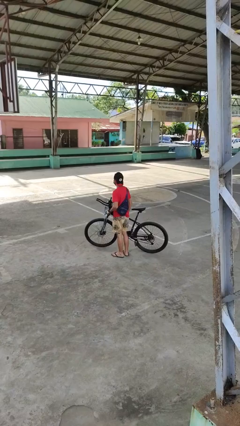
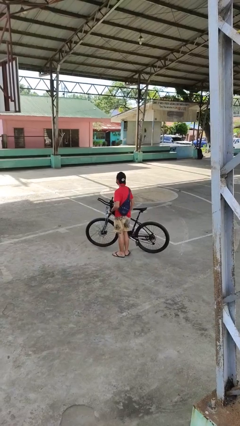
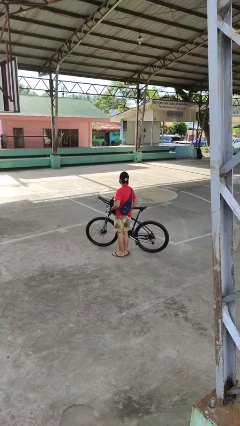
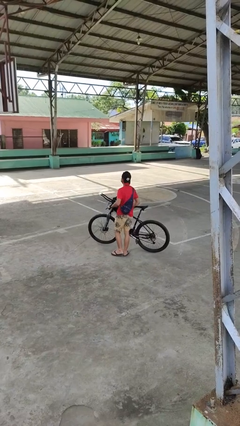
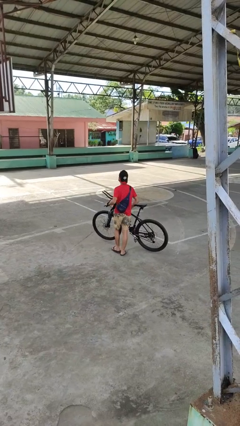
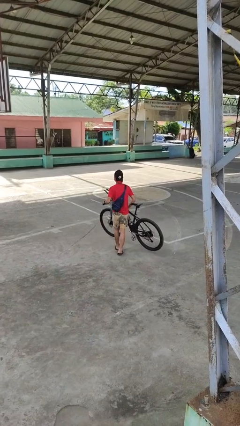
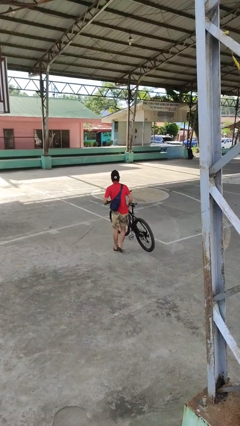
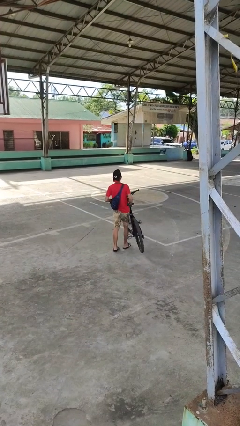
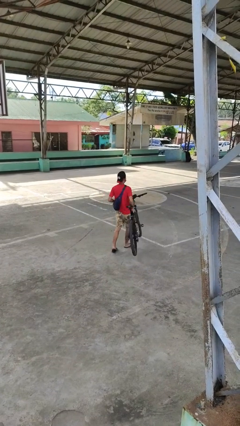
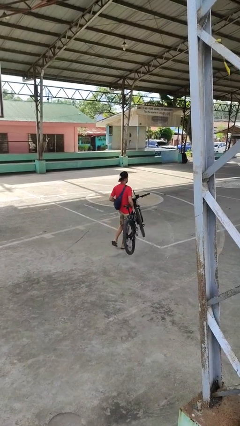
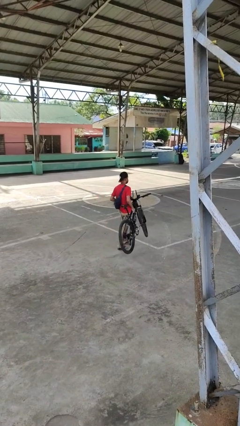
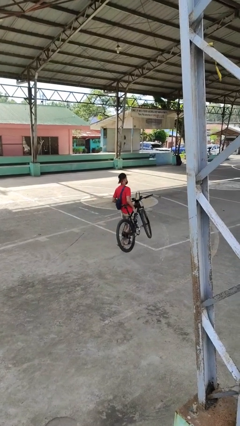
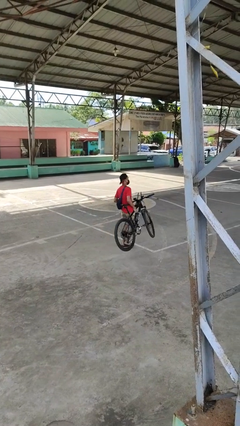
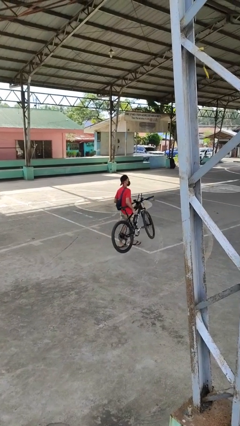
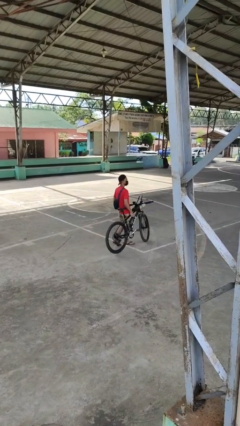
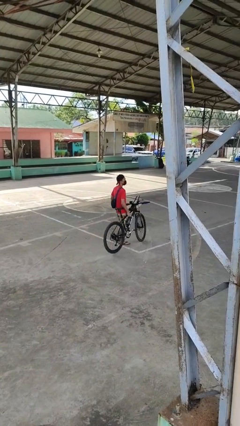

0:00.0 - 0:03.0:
person carries bicycle

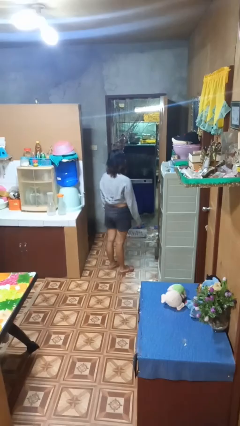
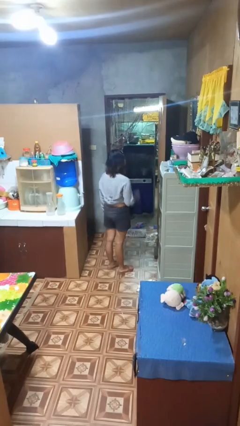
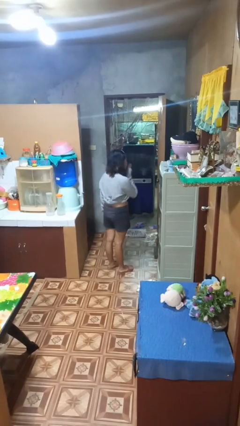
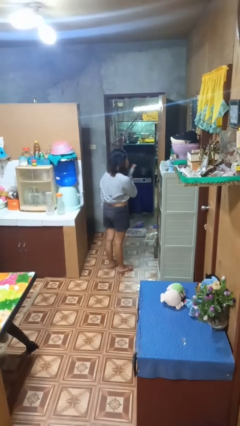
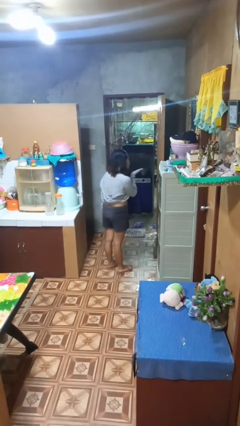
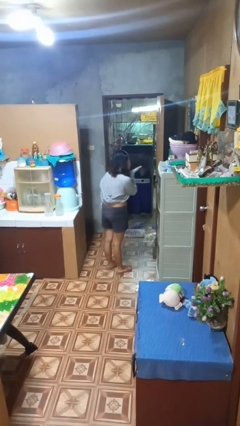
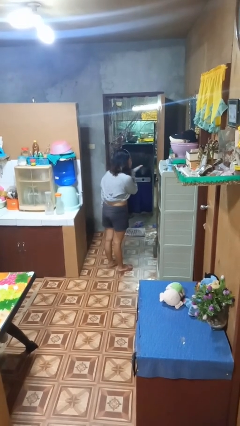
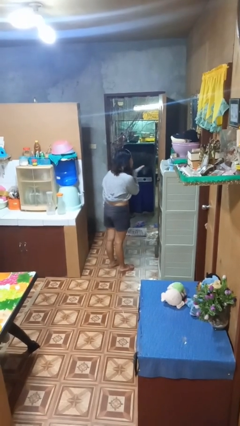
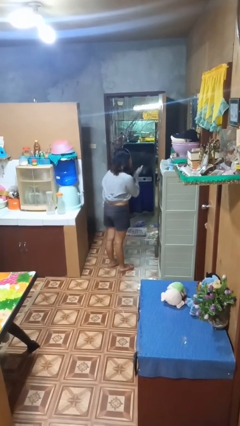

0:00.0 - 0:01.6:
person gestures blow kiss

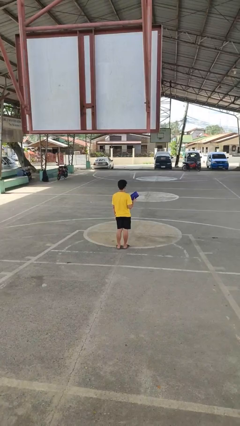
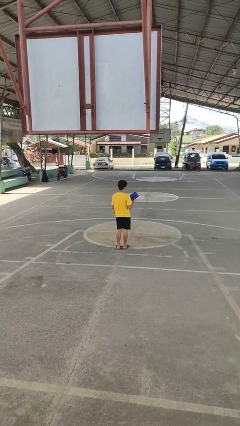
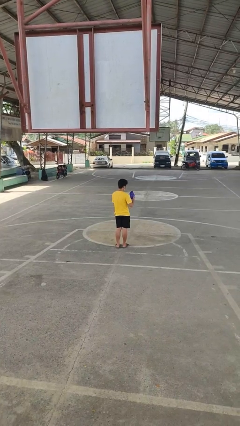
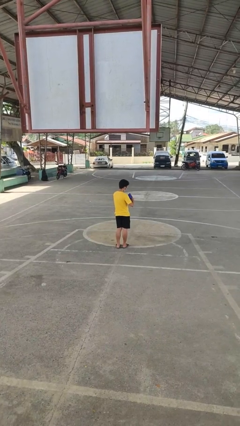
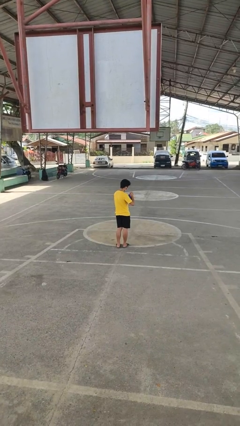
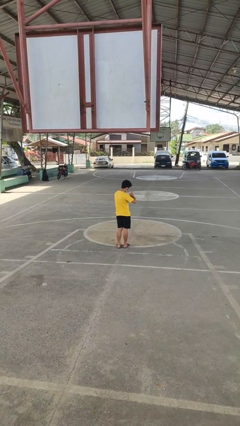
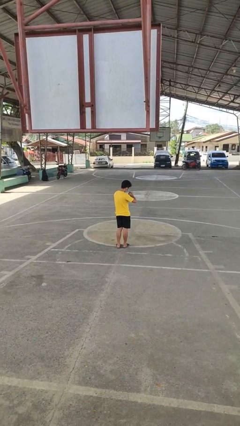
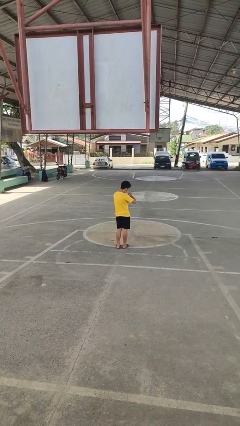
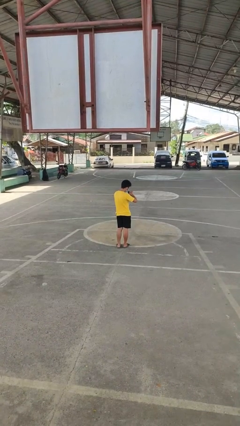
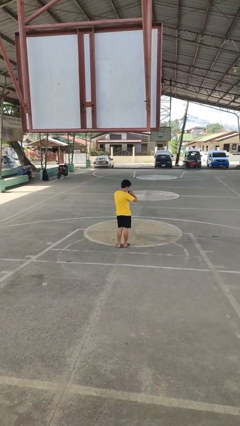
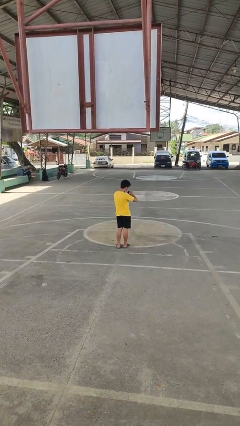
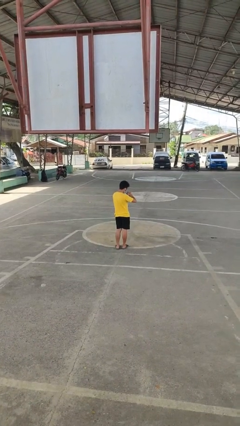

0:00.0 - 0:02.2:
person searches in purse

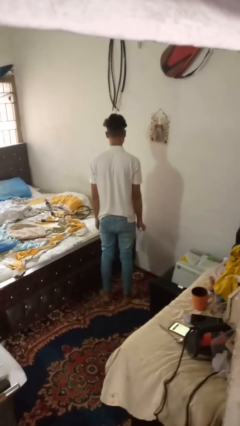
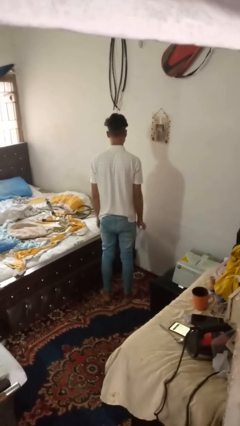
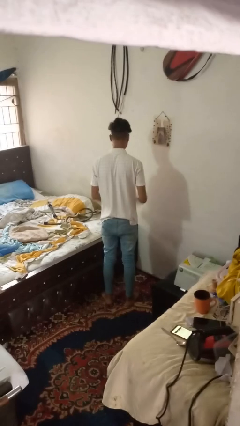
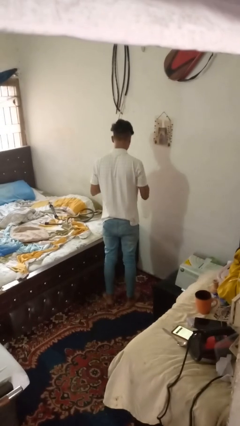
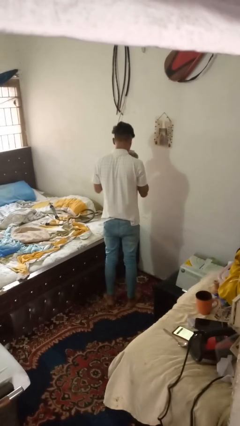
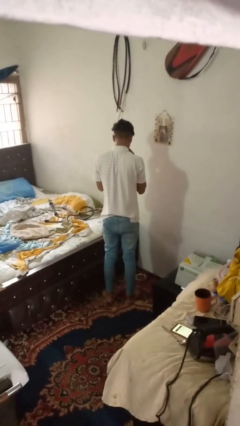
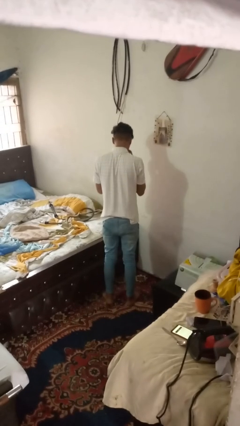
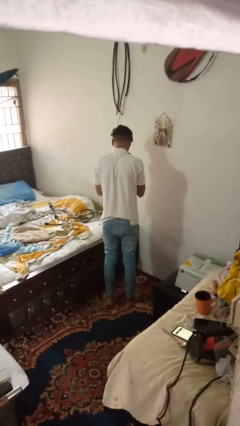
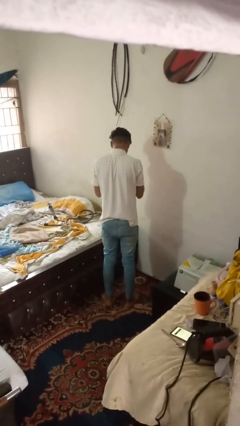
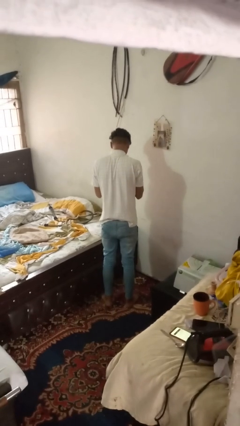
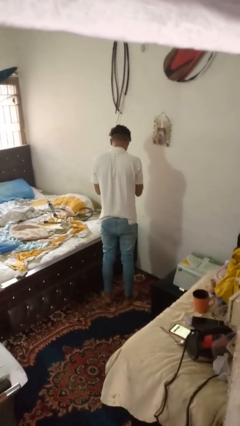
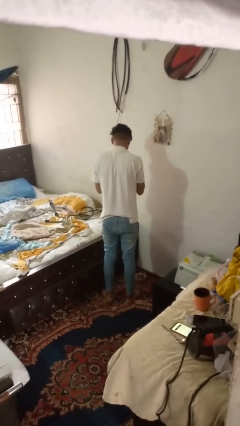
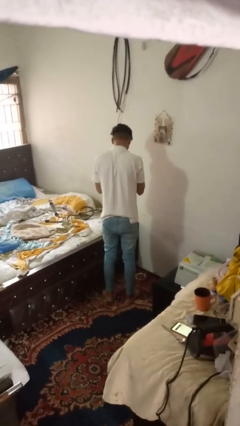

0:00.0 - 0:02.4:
person blows nose

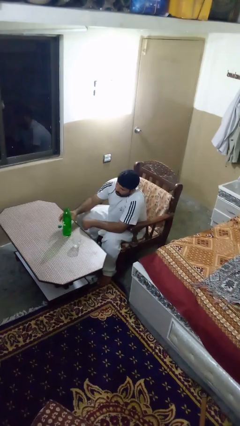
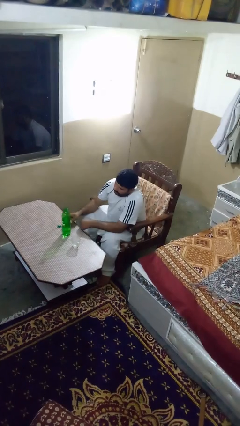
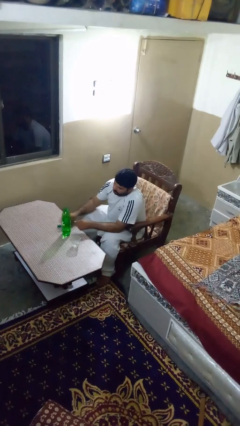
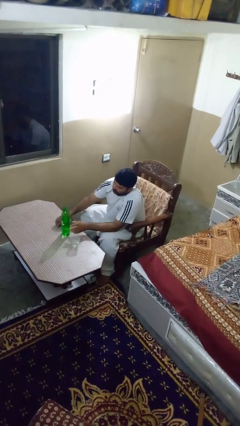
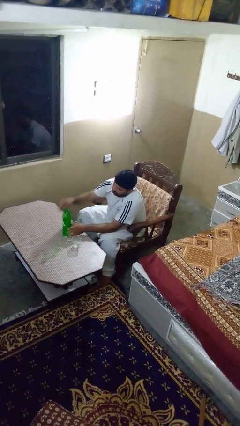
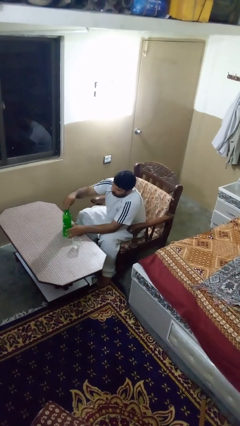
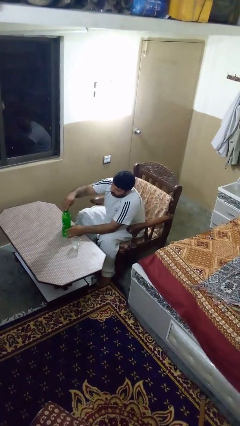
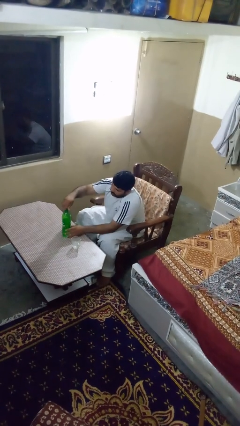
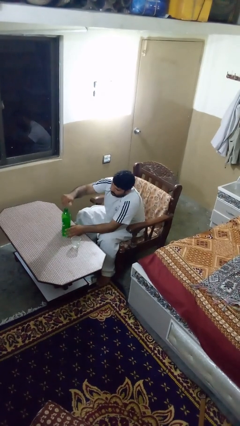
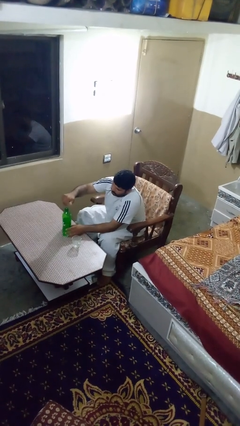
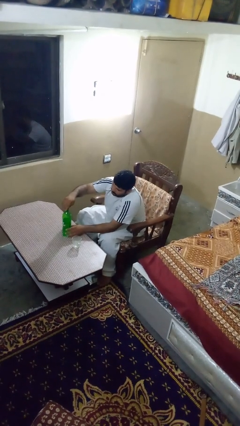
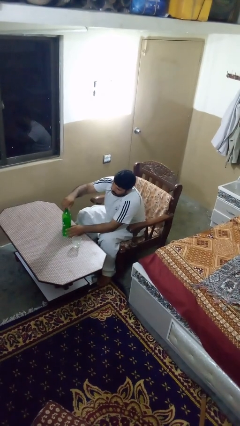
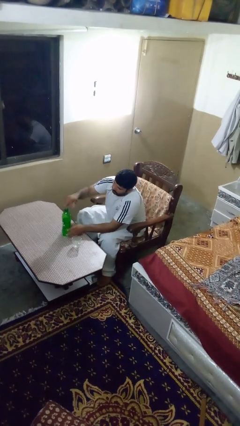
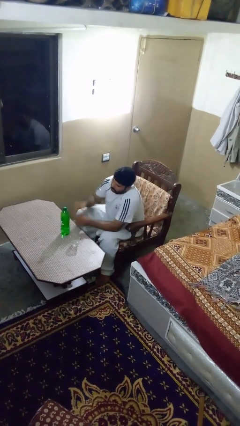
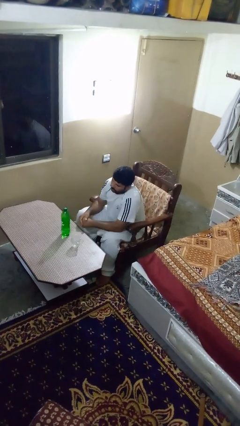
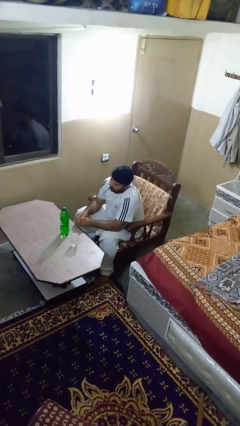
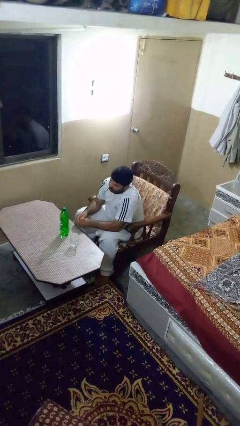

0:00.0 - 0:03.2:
person screws lid to bottle

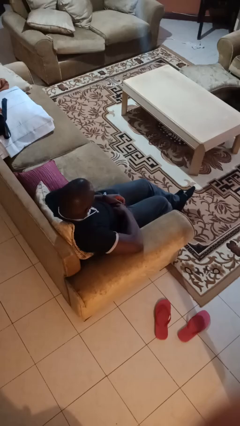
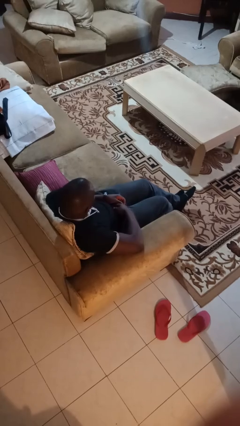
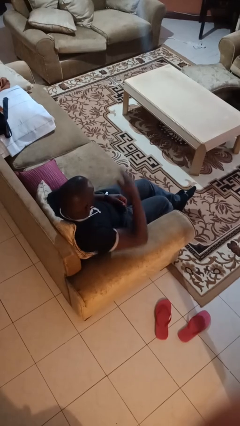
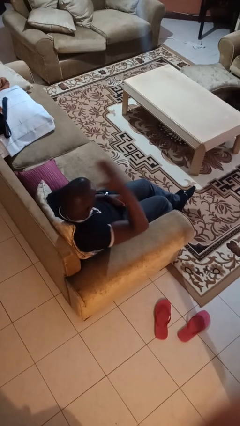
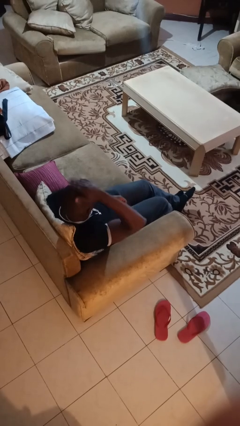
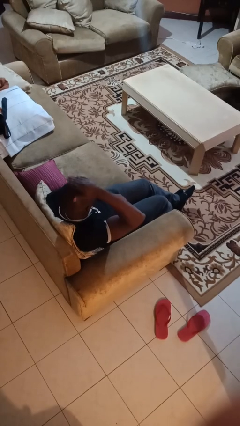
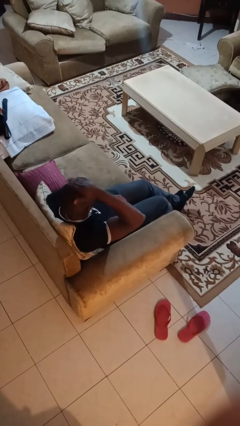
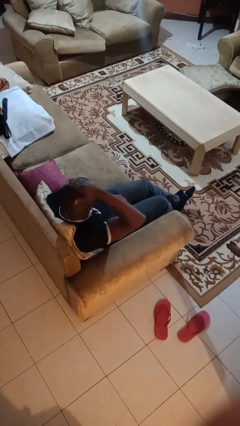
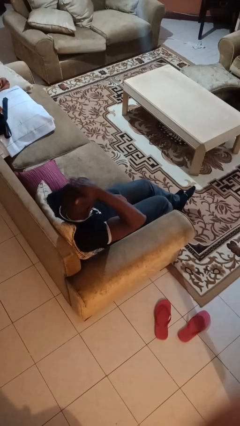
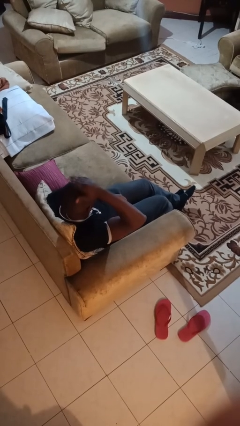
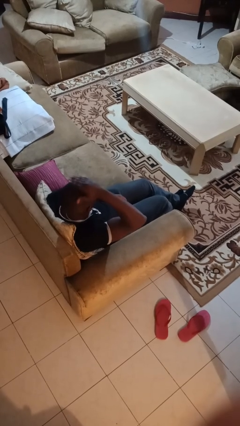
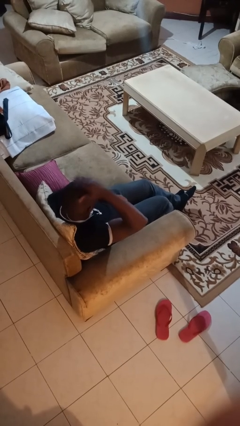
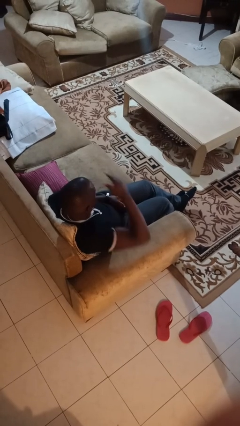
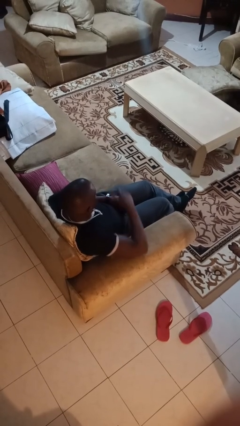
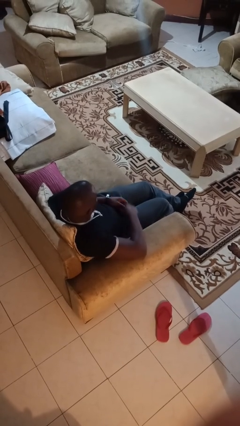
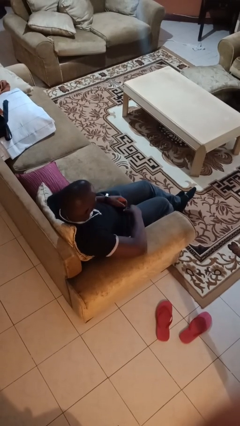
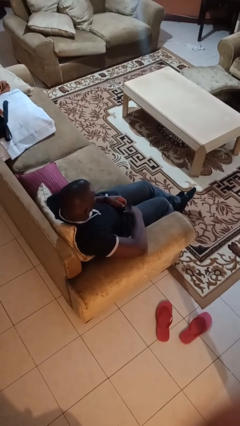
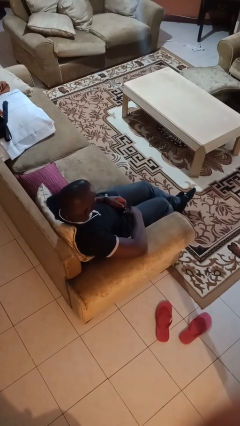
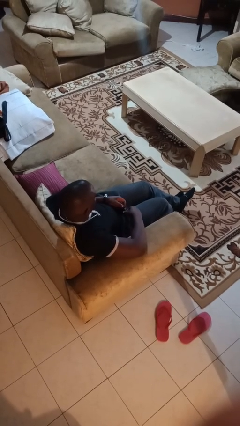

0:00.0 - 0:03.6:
person pats head

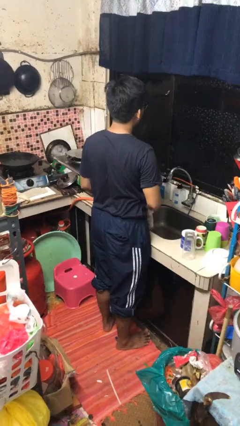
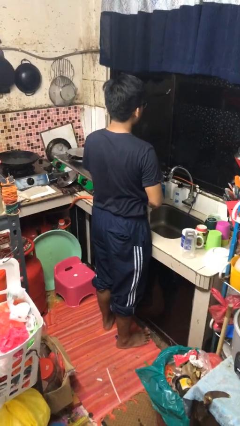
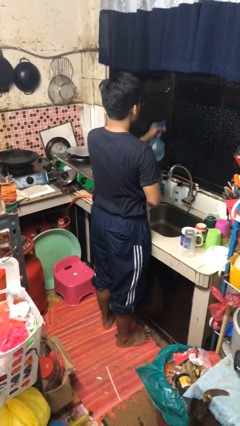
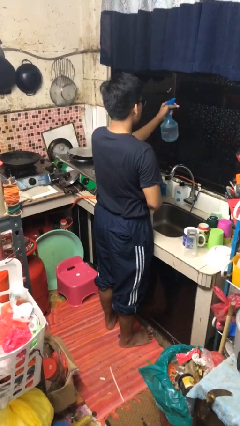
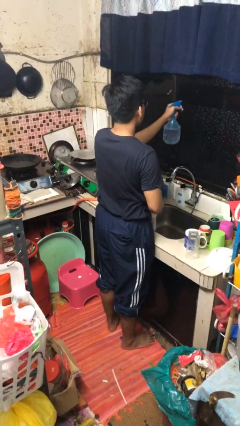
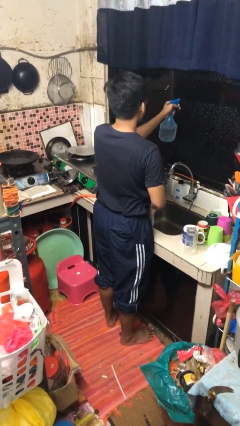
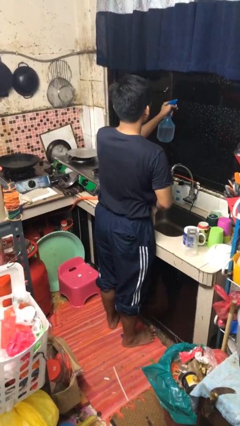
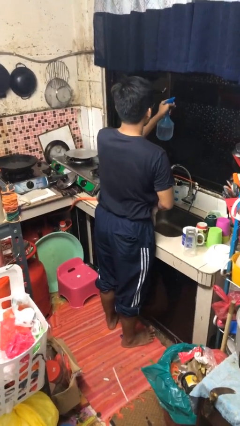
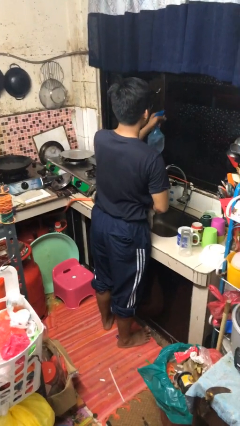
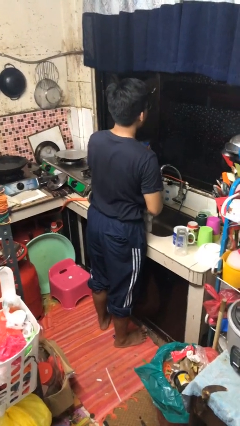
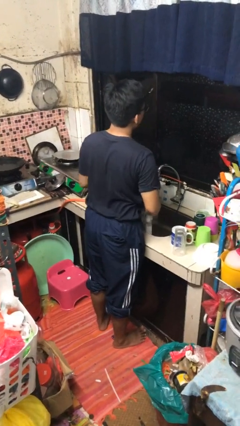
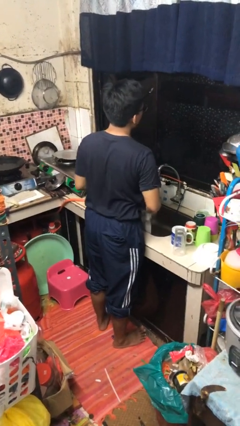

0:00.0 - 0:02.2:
person sprays from bottle
